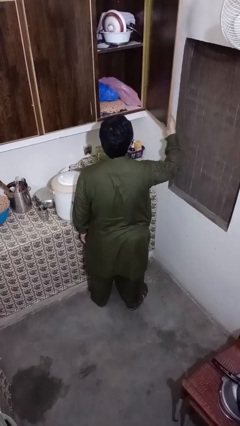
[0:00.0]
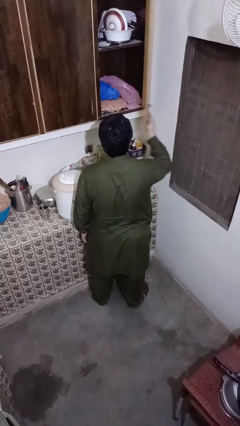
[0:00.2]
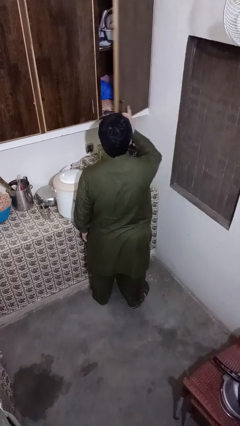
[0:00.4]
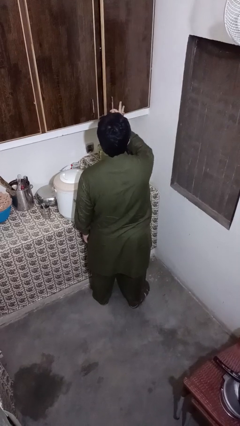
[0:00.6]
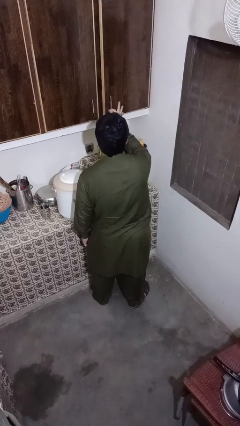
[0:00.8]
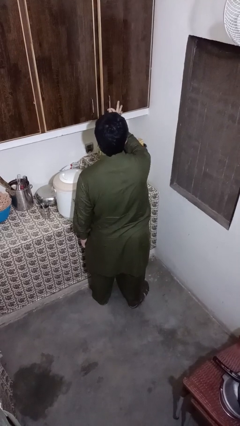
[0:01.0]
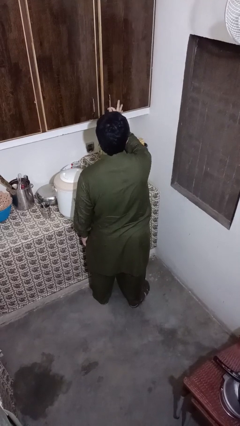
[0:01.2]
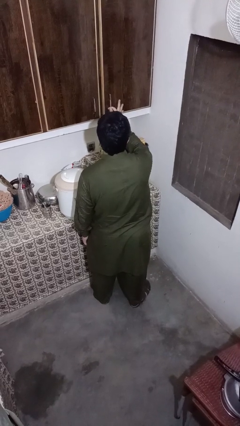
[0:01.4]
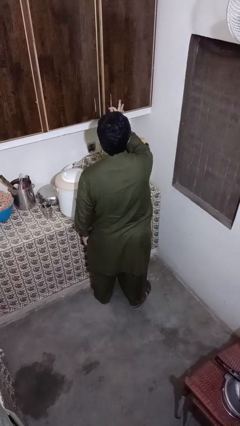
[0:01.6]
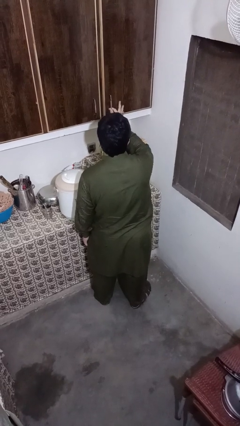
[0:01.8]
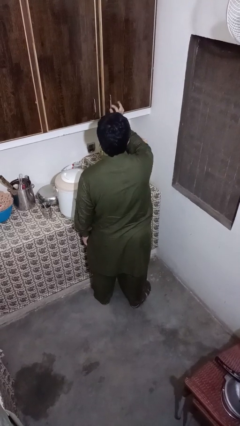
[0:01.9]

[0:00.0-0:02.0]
person closes kitchen drawer

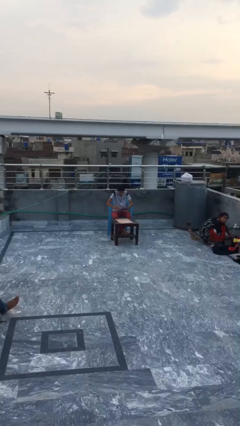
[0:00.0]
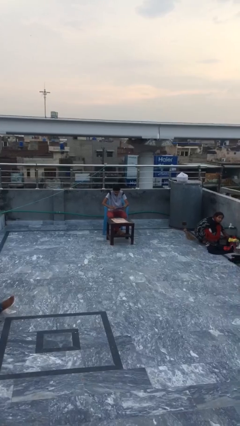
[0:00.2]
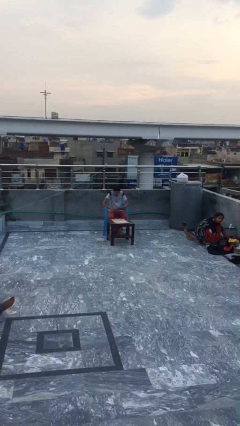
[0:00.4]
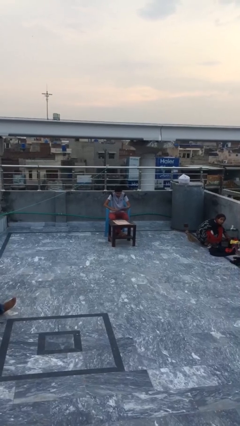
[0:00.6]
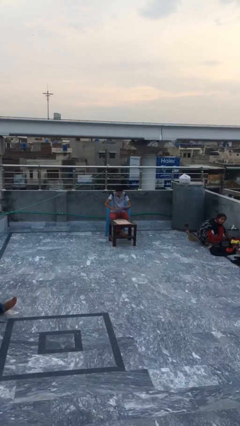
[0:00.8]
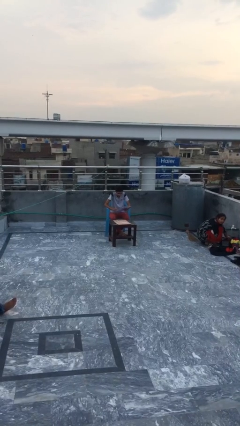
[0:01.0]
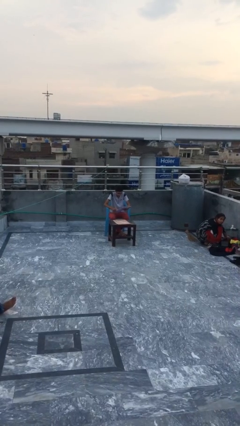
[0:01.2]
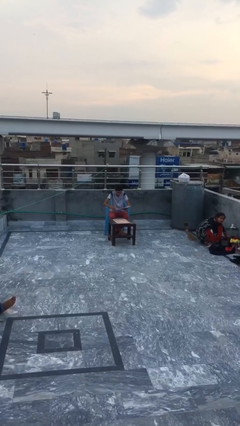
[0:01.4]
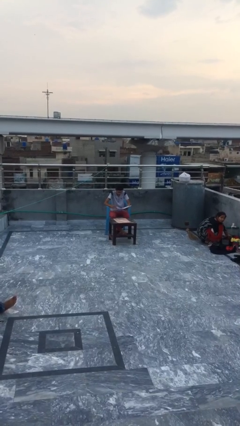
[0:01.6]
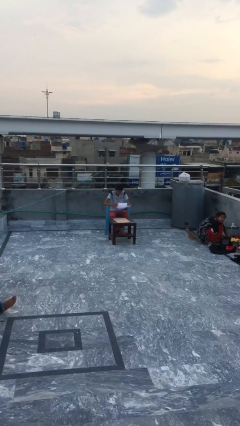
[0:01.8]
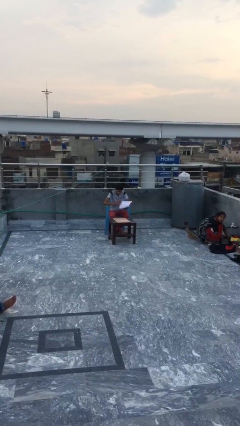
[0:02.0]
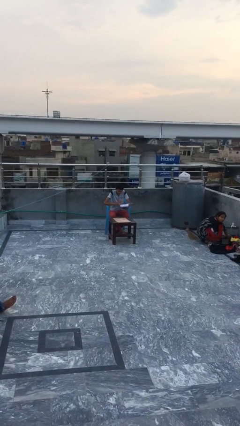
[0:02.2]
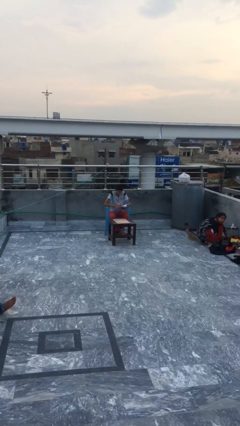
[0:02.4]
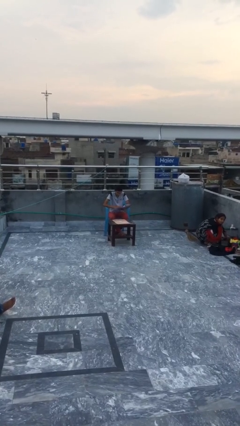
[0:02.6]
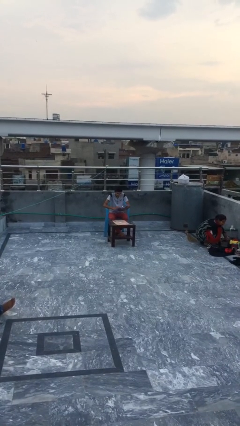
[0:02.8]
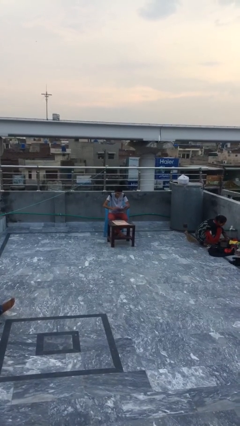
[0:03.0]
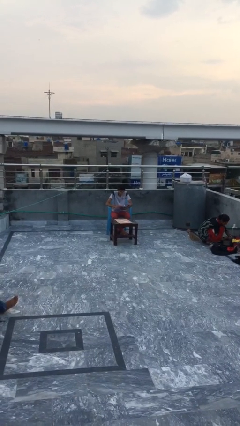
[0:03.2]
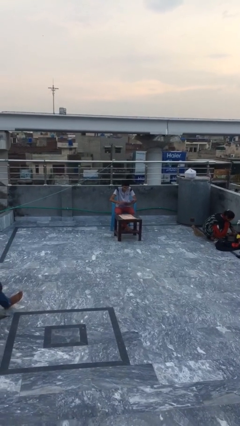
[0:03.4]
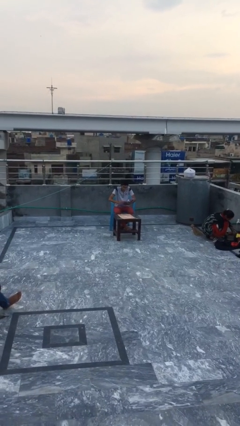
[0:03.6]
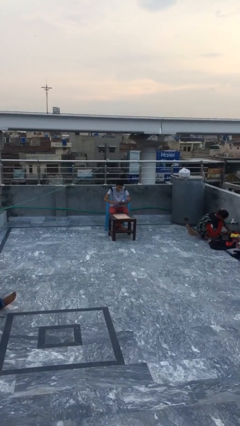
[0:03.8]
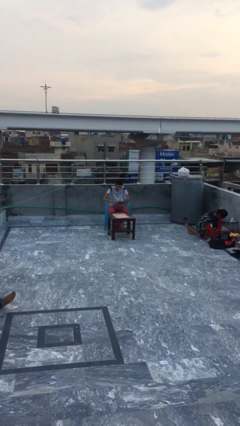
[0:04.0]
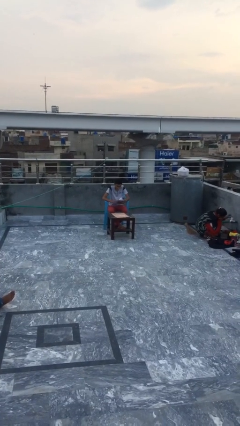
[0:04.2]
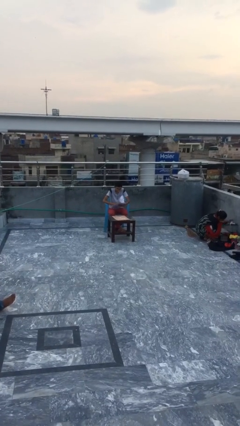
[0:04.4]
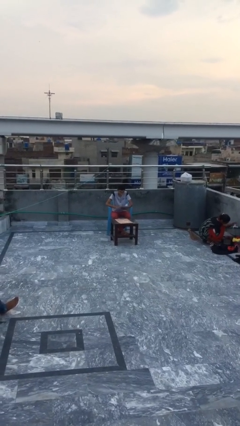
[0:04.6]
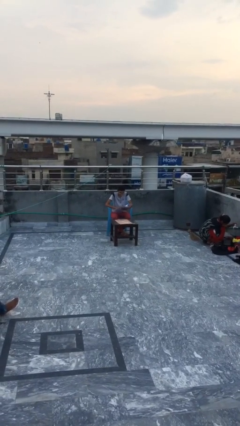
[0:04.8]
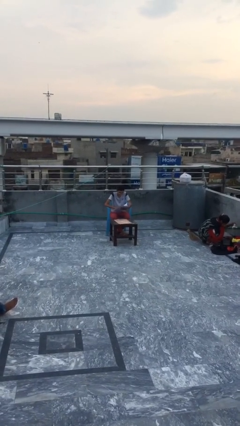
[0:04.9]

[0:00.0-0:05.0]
person reads document

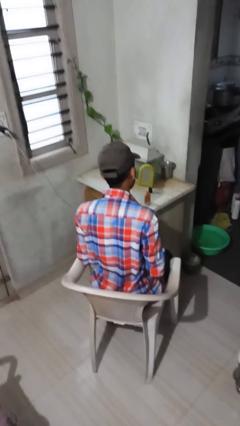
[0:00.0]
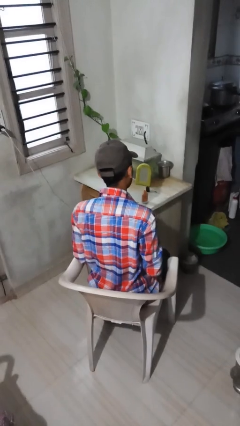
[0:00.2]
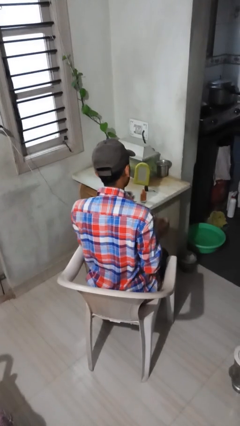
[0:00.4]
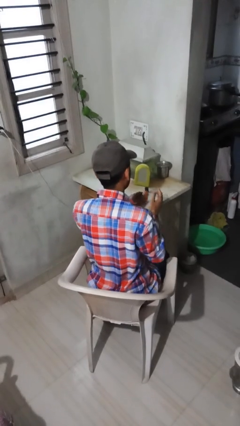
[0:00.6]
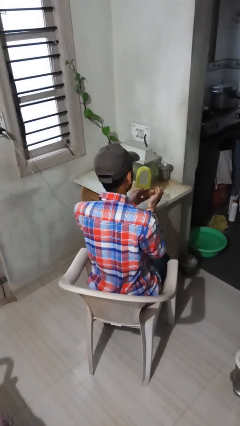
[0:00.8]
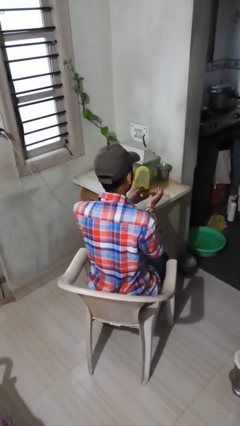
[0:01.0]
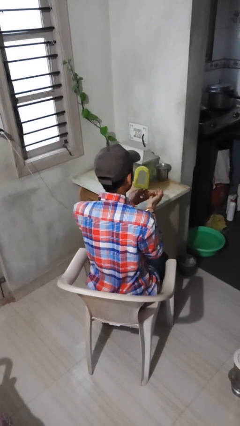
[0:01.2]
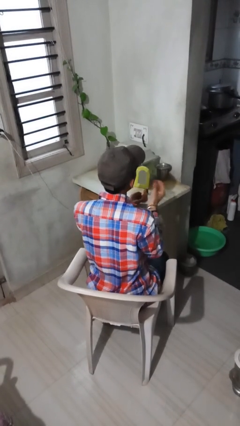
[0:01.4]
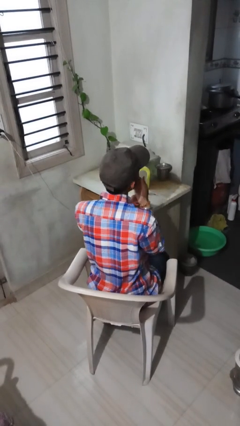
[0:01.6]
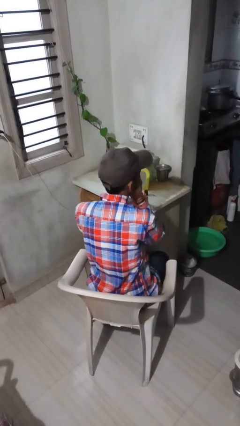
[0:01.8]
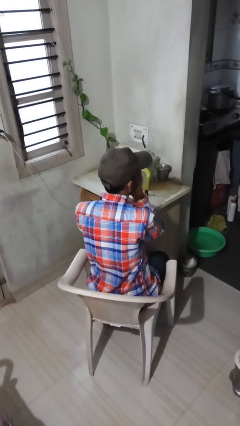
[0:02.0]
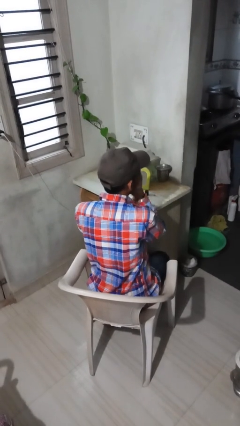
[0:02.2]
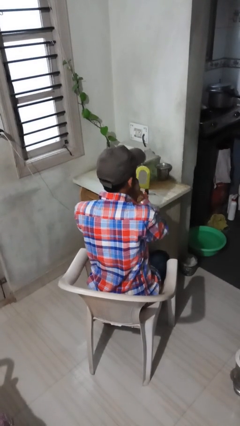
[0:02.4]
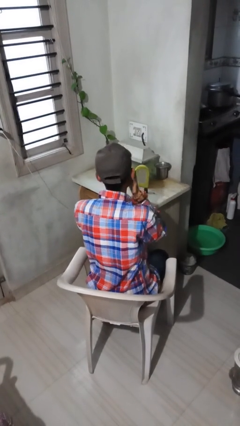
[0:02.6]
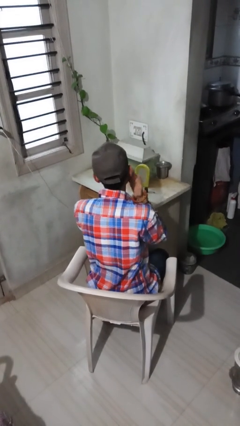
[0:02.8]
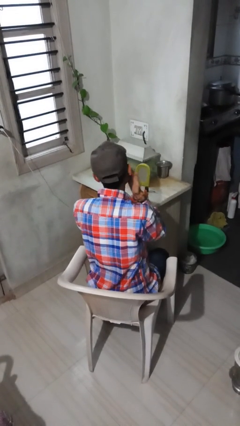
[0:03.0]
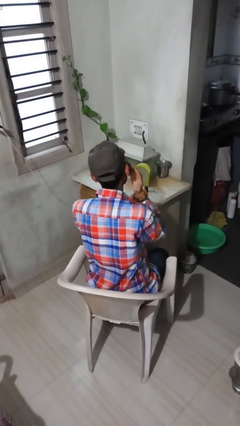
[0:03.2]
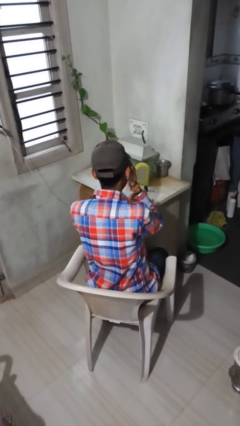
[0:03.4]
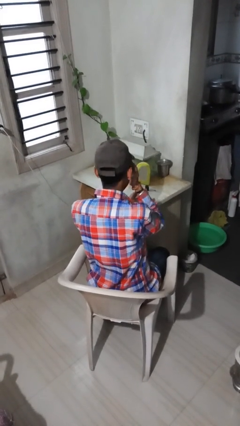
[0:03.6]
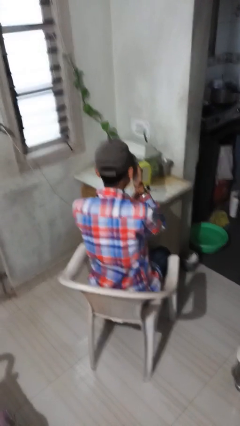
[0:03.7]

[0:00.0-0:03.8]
person applies foundation makeup

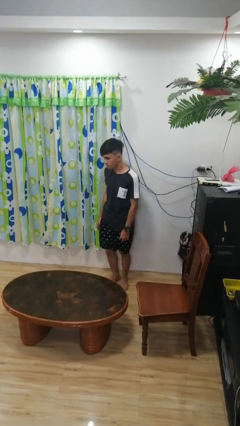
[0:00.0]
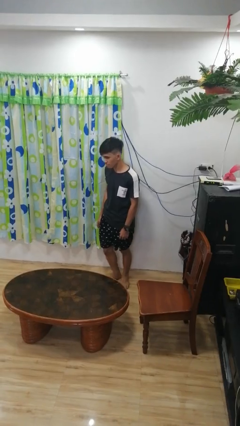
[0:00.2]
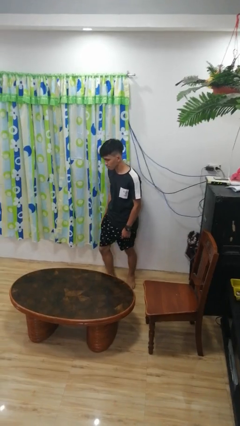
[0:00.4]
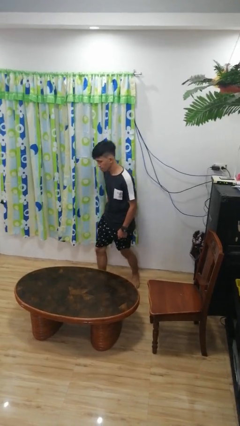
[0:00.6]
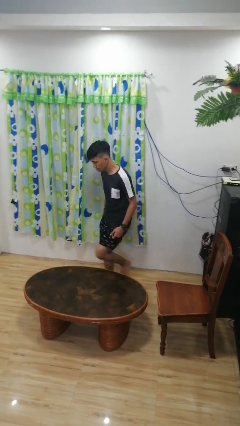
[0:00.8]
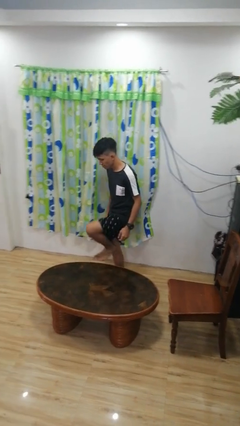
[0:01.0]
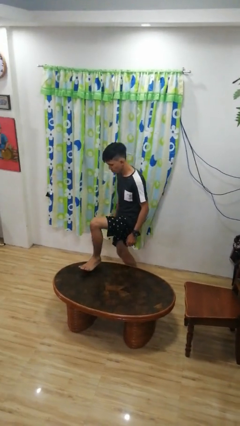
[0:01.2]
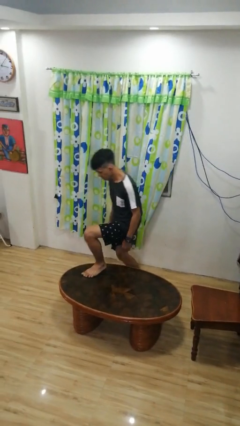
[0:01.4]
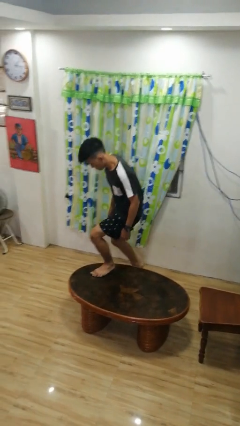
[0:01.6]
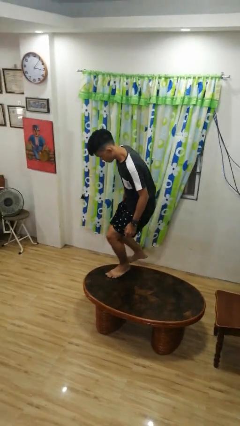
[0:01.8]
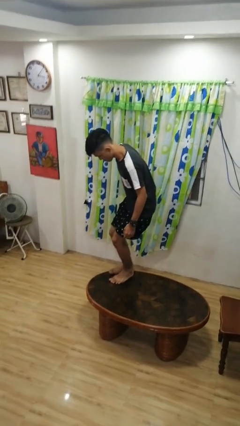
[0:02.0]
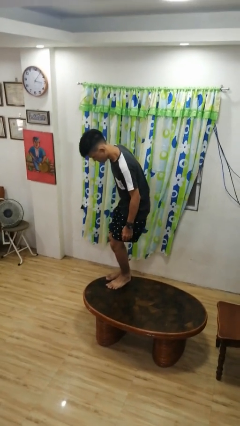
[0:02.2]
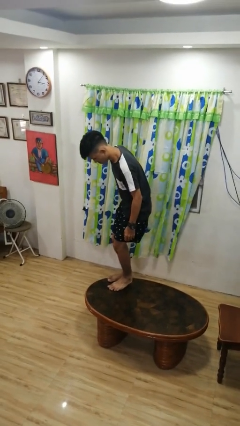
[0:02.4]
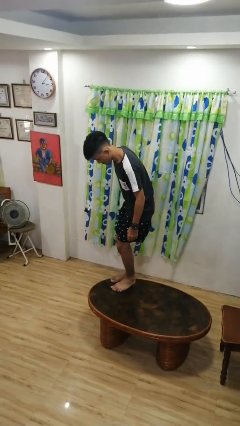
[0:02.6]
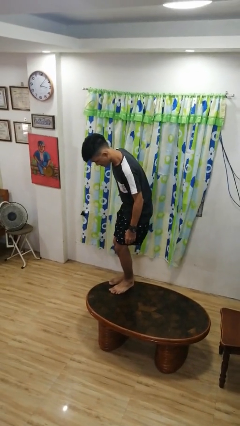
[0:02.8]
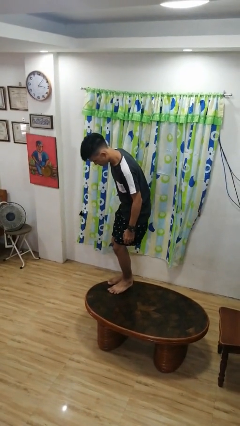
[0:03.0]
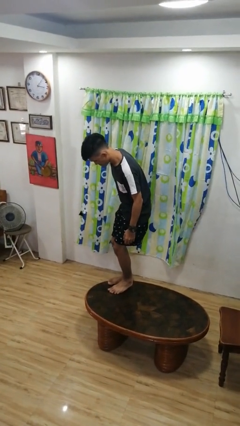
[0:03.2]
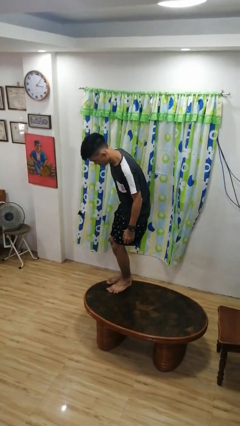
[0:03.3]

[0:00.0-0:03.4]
person climbs on table

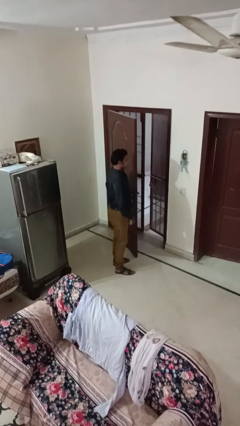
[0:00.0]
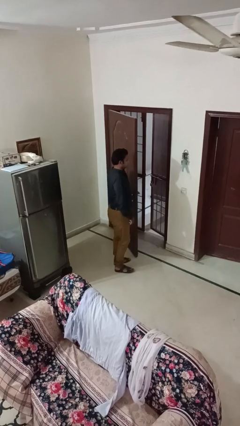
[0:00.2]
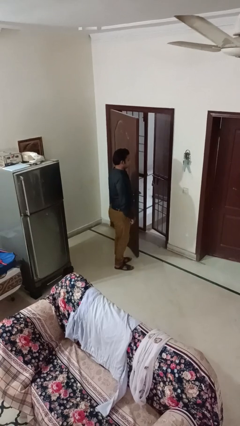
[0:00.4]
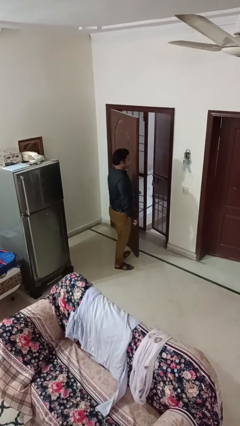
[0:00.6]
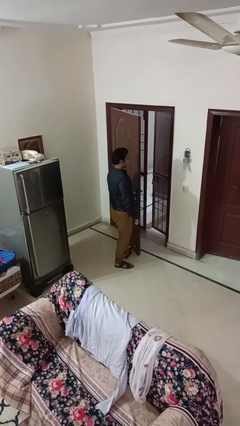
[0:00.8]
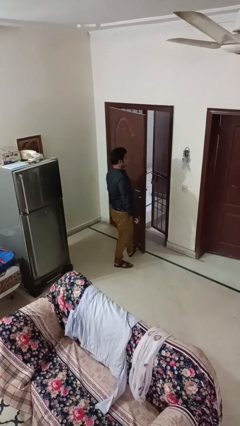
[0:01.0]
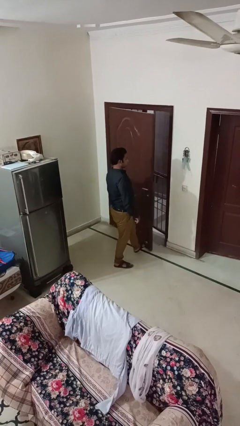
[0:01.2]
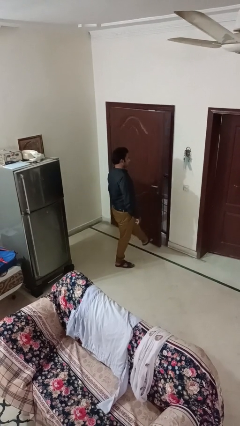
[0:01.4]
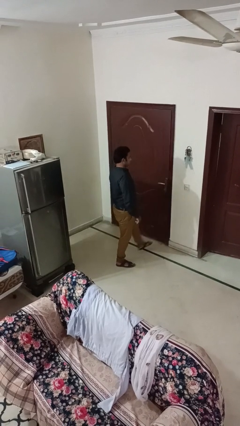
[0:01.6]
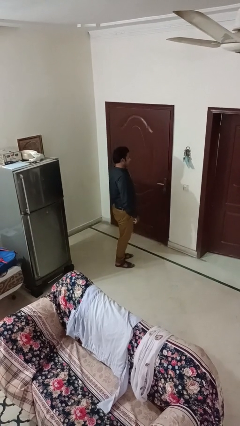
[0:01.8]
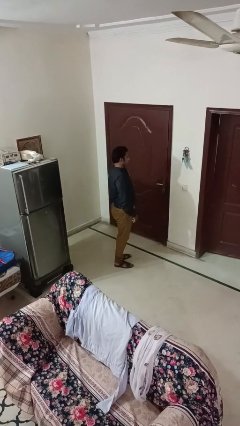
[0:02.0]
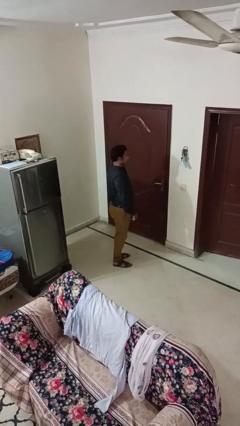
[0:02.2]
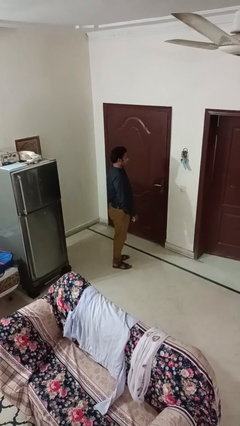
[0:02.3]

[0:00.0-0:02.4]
person closes door with foot

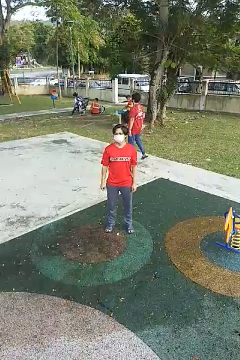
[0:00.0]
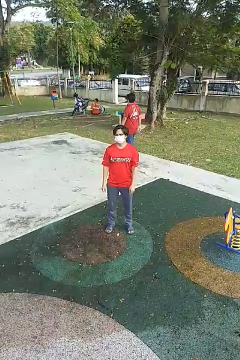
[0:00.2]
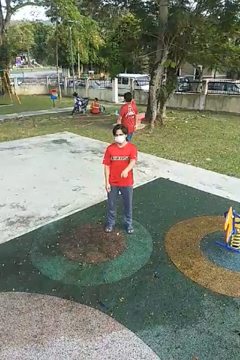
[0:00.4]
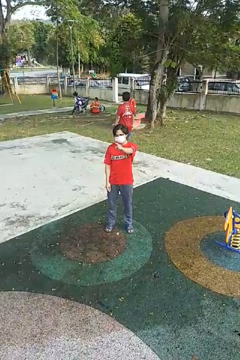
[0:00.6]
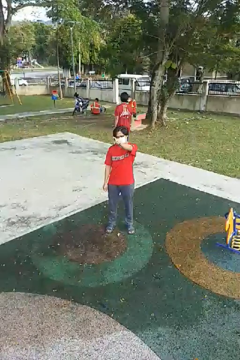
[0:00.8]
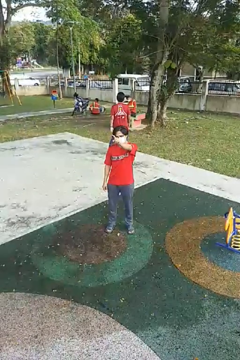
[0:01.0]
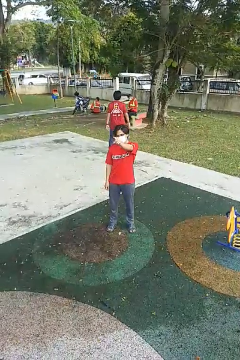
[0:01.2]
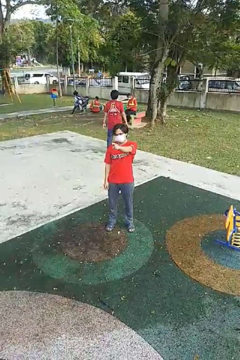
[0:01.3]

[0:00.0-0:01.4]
person points at person
